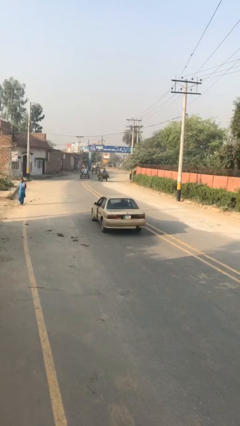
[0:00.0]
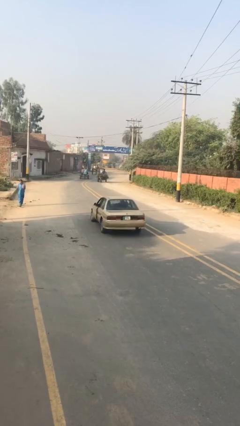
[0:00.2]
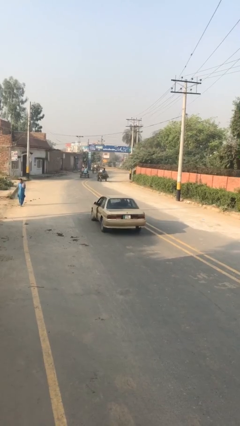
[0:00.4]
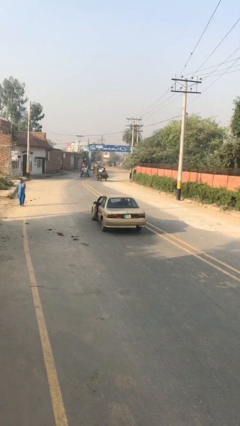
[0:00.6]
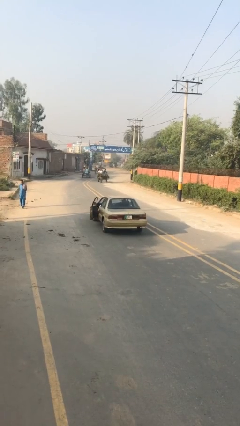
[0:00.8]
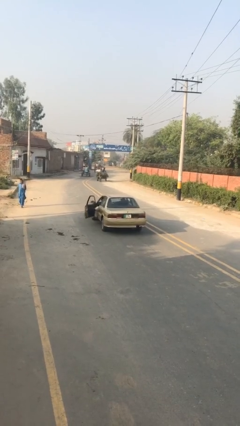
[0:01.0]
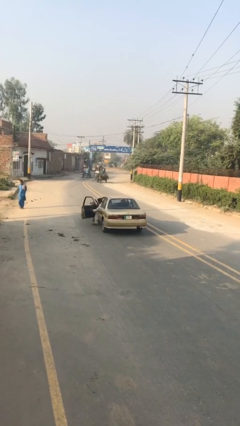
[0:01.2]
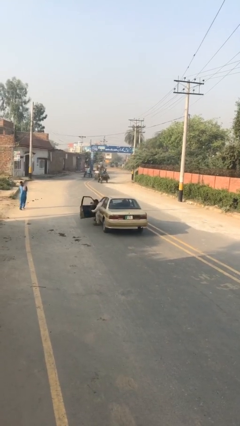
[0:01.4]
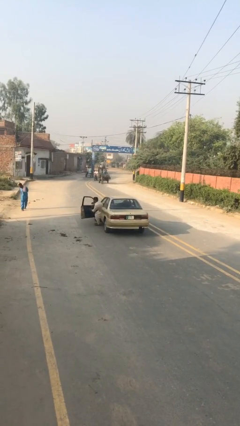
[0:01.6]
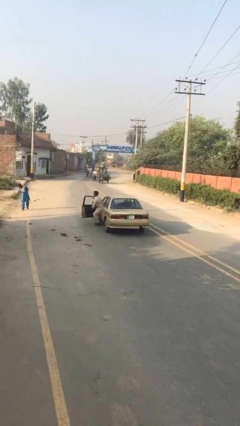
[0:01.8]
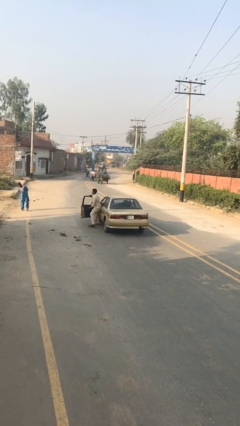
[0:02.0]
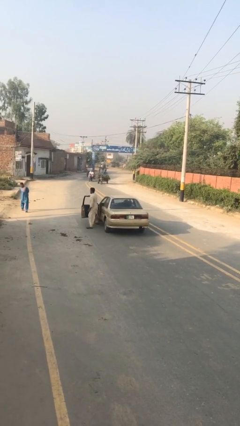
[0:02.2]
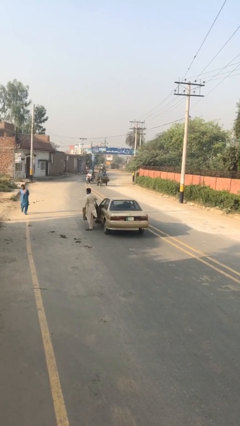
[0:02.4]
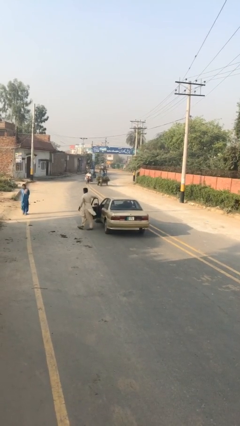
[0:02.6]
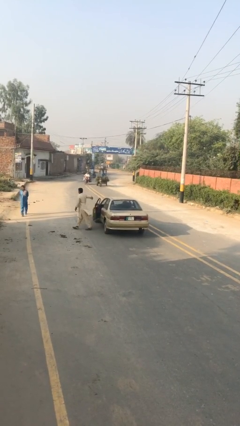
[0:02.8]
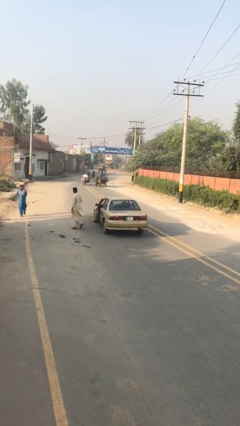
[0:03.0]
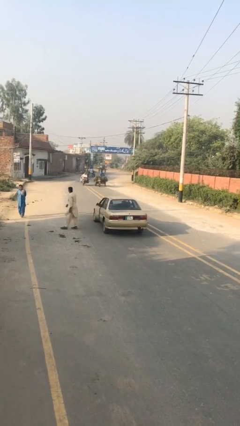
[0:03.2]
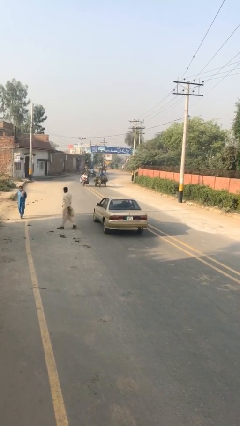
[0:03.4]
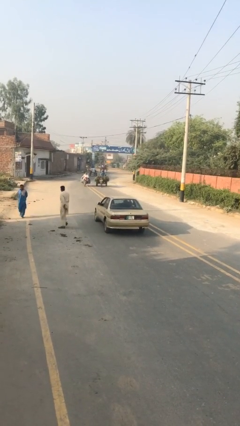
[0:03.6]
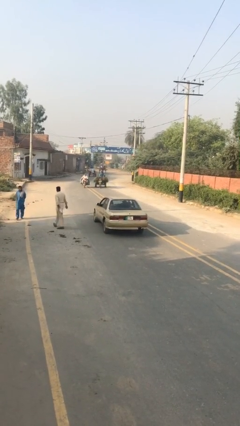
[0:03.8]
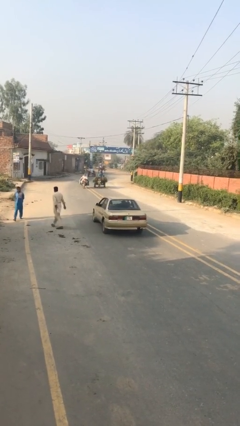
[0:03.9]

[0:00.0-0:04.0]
car drops off person

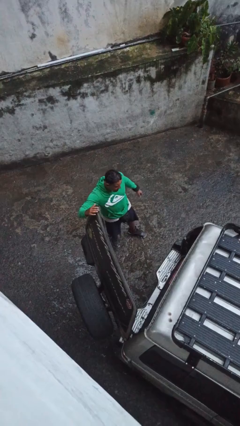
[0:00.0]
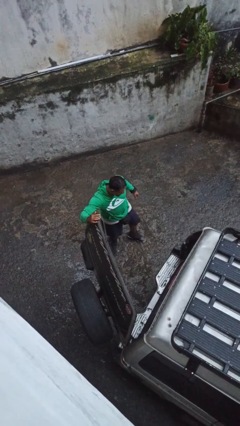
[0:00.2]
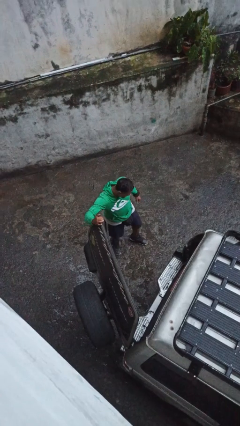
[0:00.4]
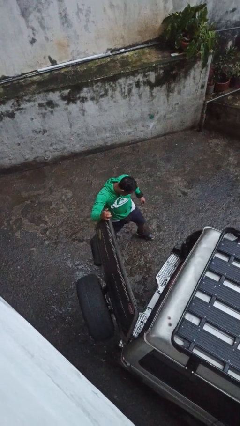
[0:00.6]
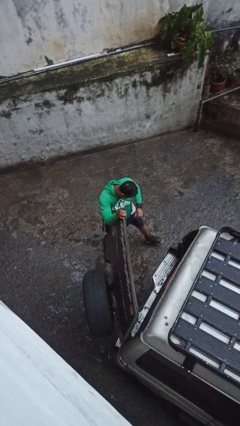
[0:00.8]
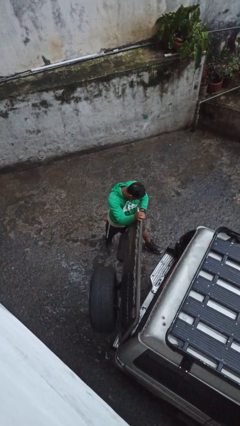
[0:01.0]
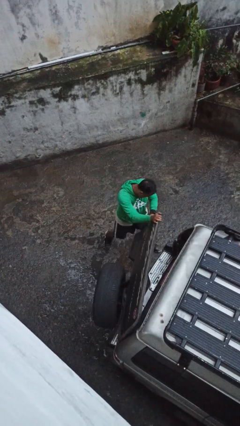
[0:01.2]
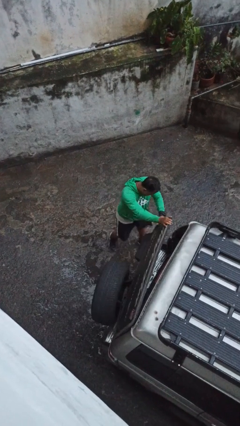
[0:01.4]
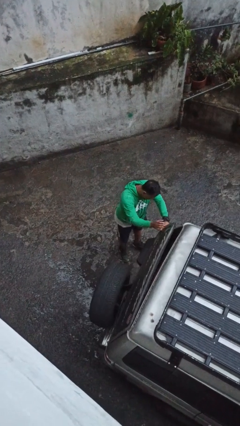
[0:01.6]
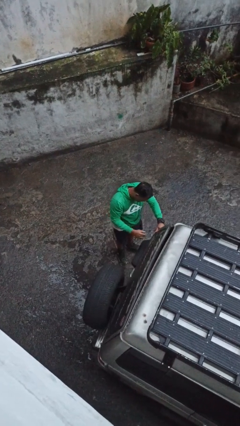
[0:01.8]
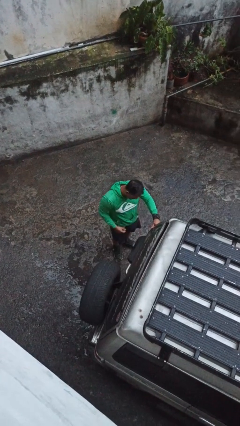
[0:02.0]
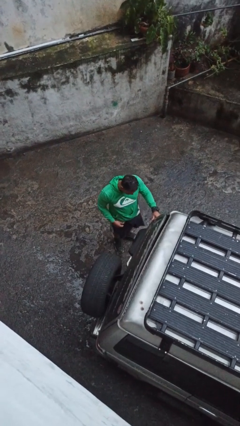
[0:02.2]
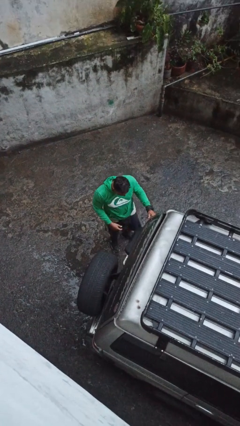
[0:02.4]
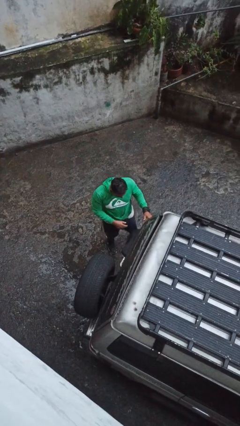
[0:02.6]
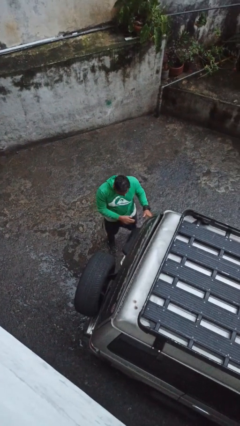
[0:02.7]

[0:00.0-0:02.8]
person closes car trunk

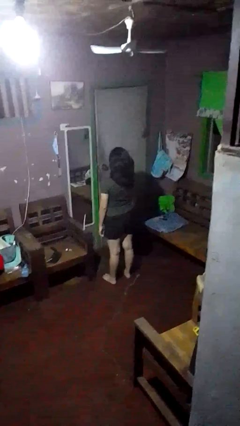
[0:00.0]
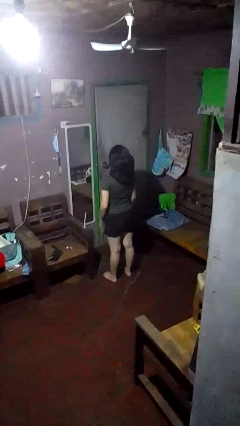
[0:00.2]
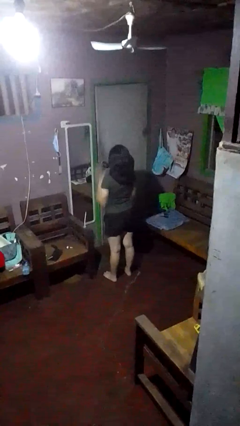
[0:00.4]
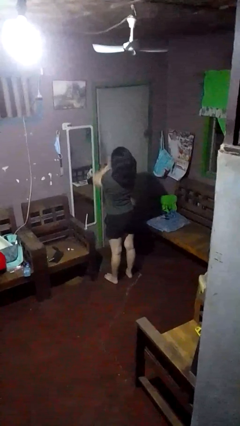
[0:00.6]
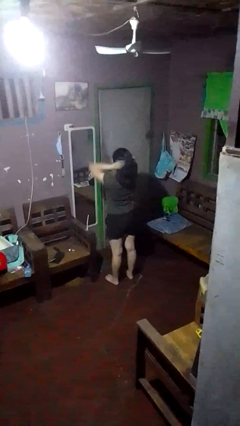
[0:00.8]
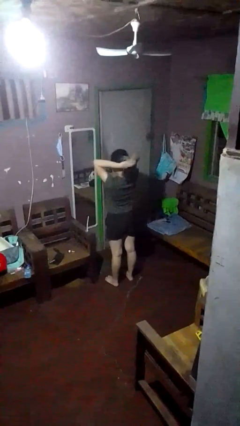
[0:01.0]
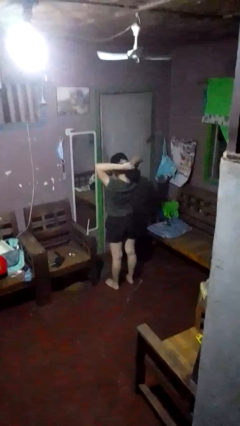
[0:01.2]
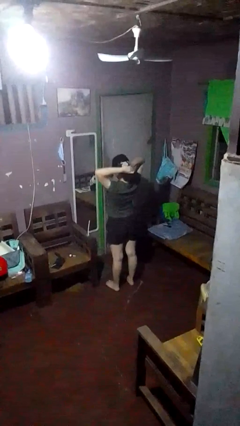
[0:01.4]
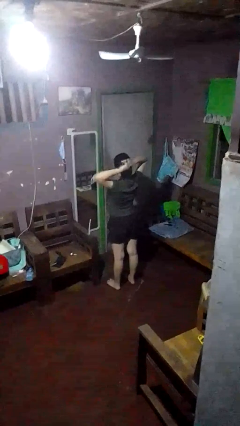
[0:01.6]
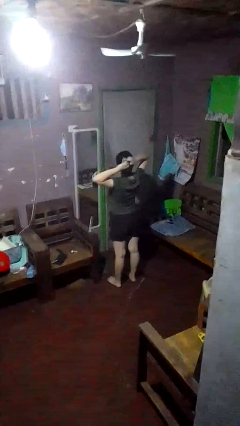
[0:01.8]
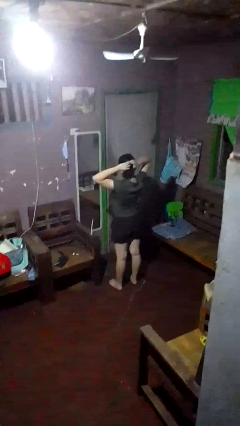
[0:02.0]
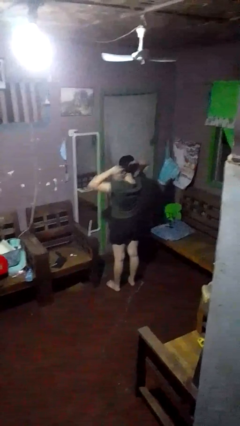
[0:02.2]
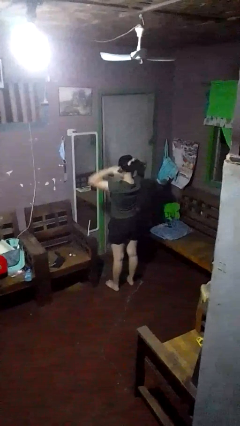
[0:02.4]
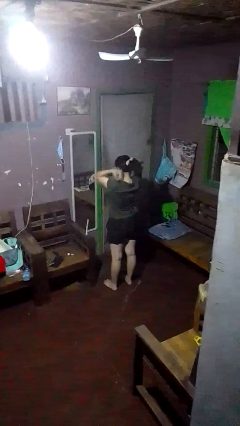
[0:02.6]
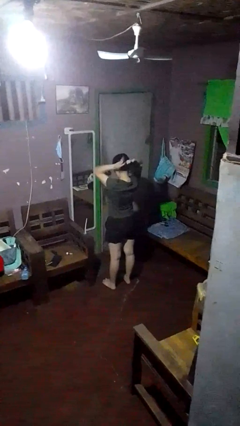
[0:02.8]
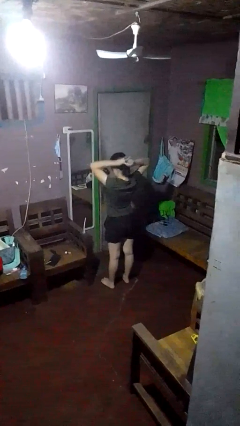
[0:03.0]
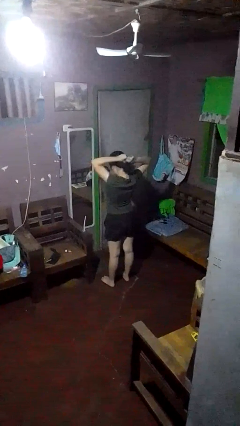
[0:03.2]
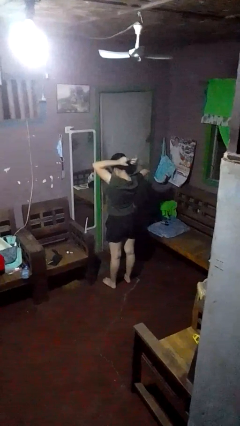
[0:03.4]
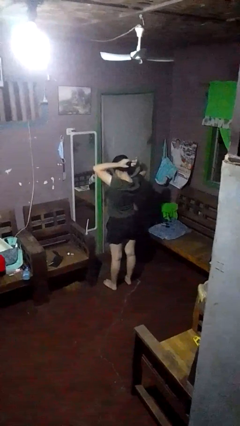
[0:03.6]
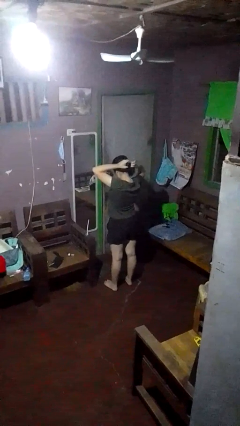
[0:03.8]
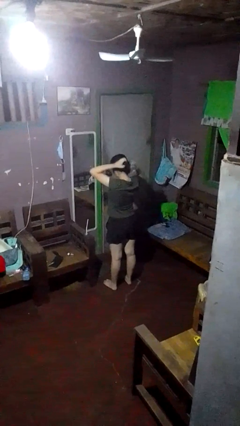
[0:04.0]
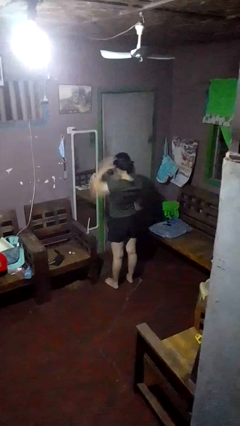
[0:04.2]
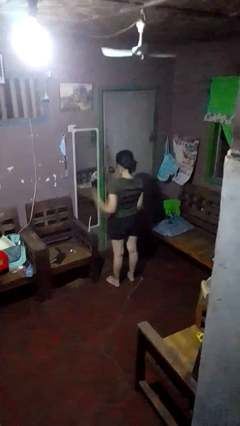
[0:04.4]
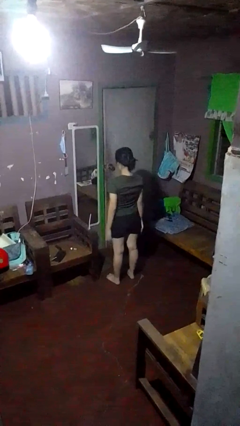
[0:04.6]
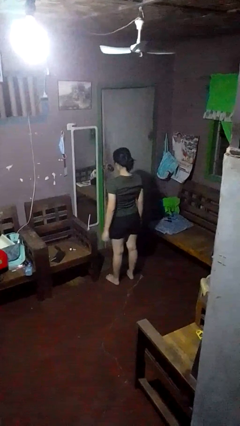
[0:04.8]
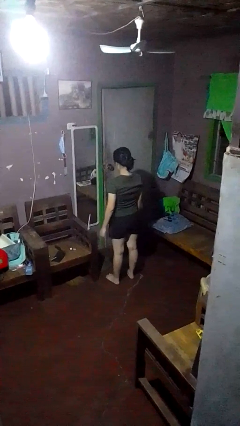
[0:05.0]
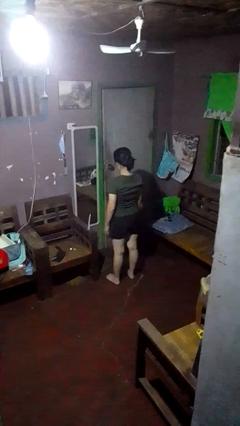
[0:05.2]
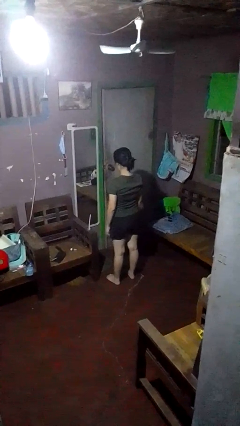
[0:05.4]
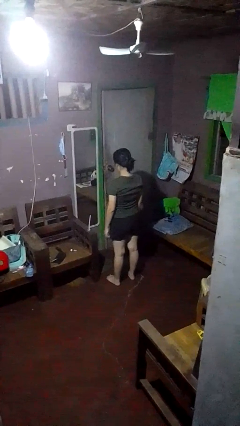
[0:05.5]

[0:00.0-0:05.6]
person puts hair in ponytail

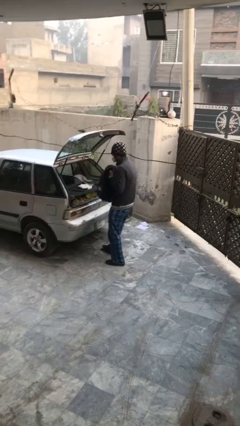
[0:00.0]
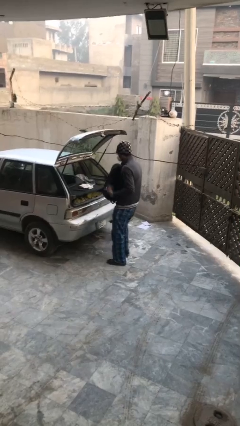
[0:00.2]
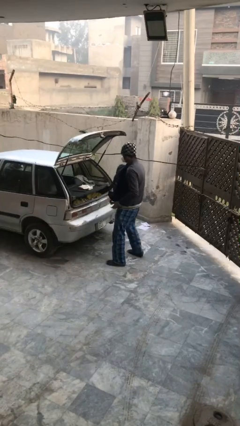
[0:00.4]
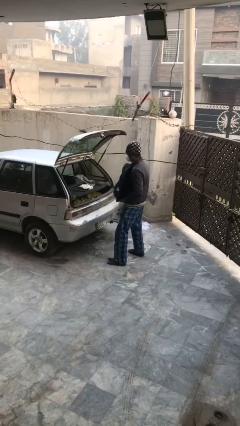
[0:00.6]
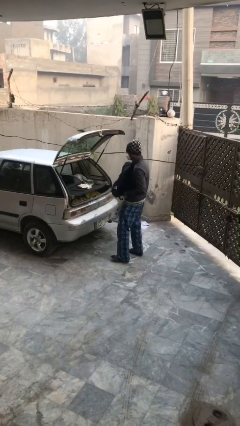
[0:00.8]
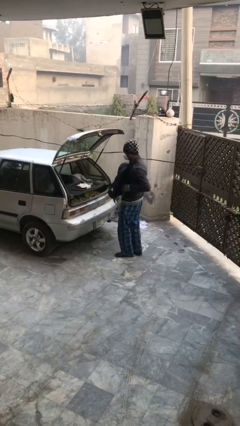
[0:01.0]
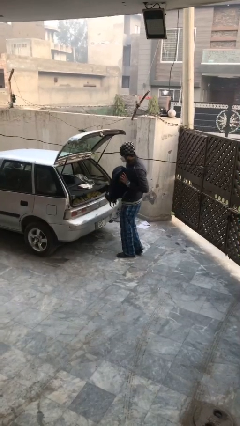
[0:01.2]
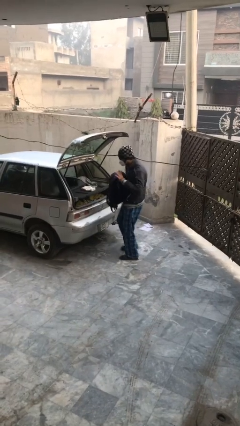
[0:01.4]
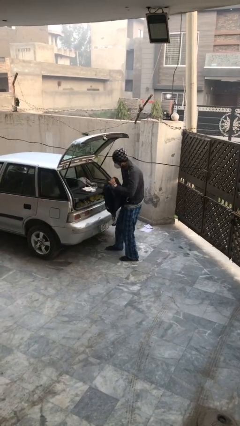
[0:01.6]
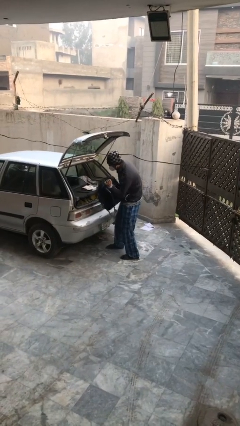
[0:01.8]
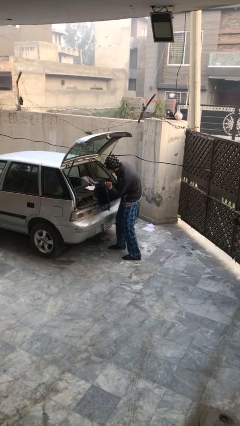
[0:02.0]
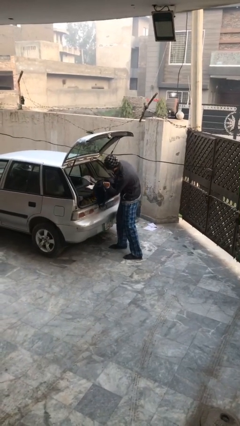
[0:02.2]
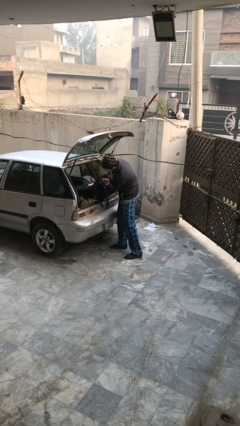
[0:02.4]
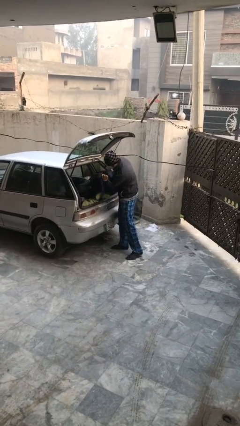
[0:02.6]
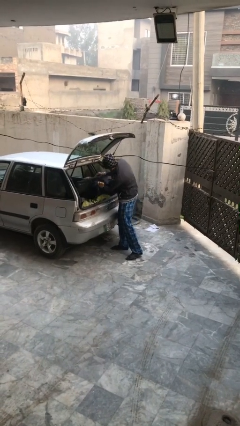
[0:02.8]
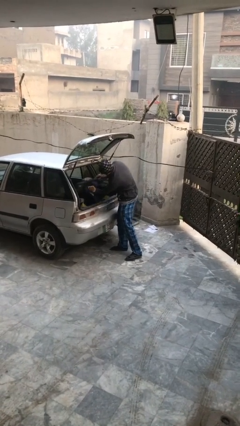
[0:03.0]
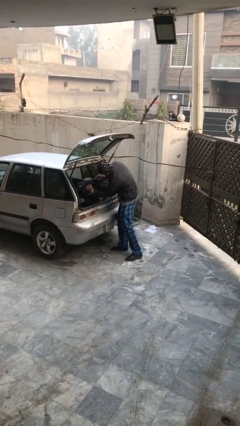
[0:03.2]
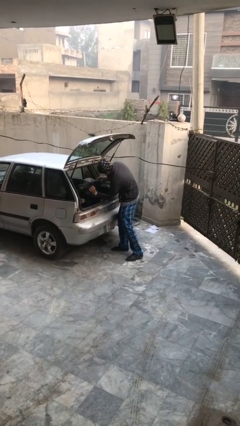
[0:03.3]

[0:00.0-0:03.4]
person loads car

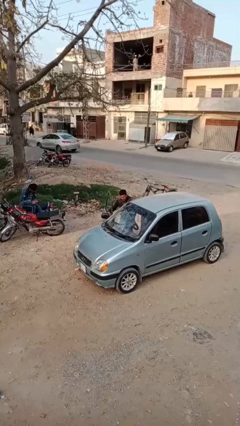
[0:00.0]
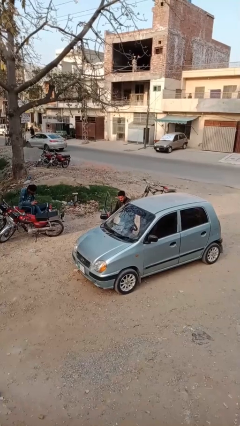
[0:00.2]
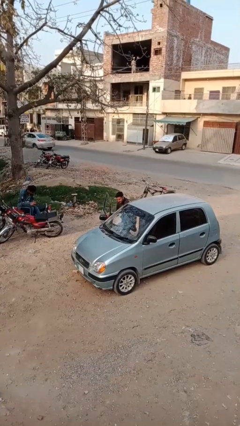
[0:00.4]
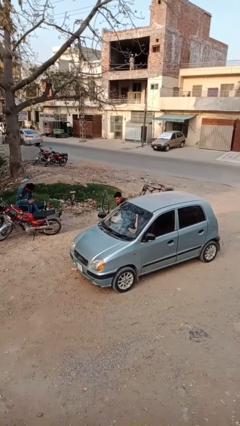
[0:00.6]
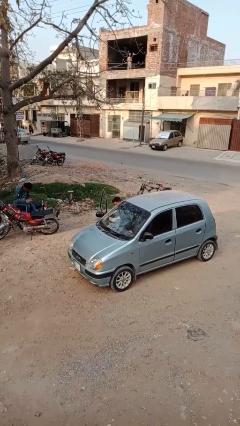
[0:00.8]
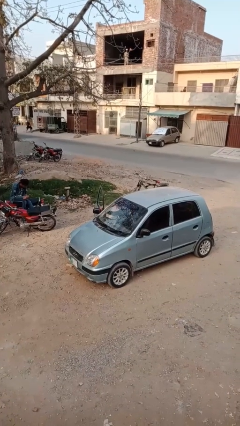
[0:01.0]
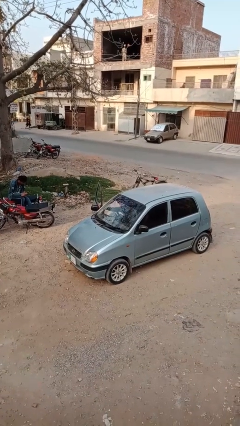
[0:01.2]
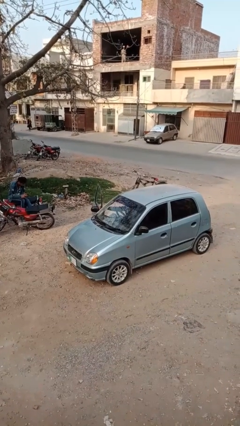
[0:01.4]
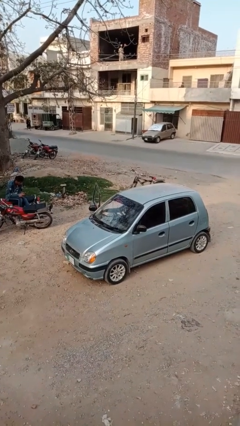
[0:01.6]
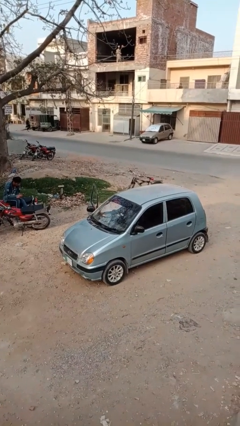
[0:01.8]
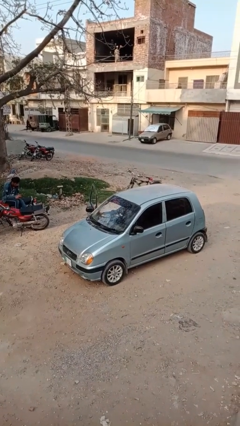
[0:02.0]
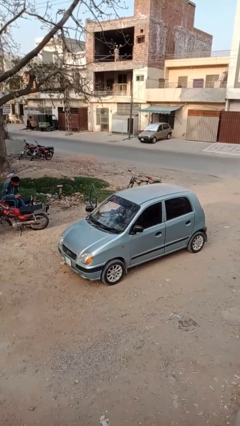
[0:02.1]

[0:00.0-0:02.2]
person enters car
